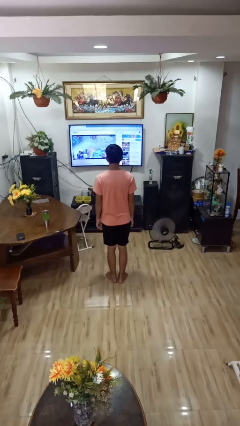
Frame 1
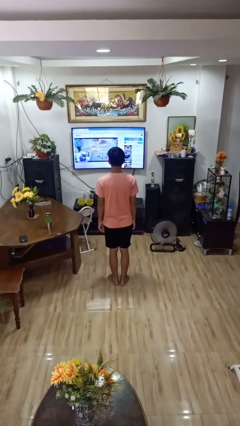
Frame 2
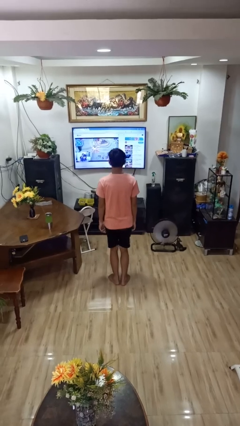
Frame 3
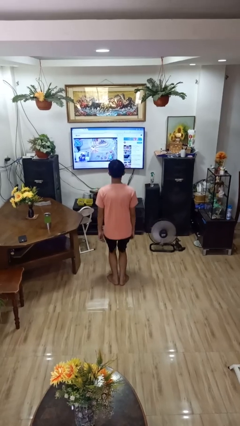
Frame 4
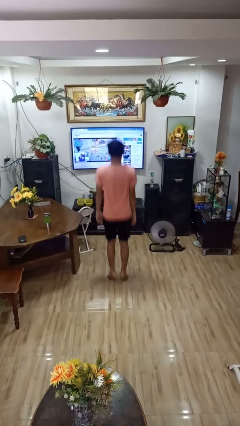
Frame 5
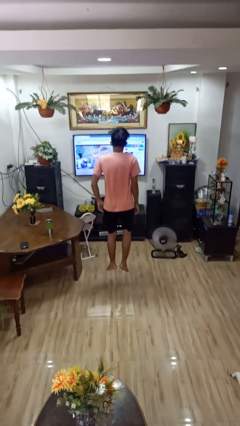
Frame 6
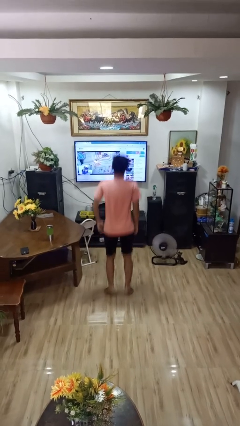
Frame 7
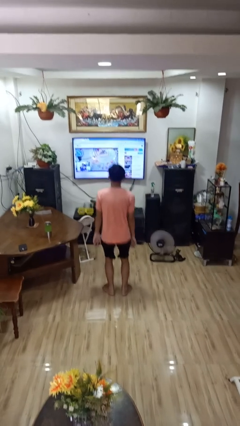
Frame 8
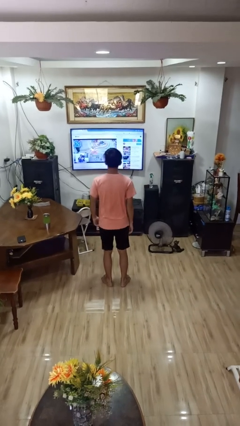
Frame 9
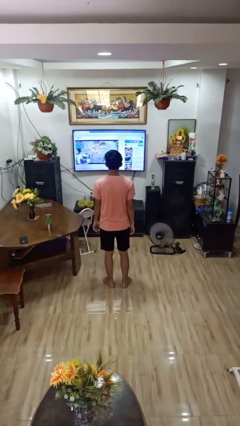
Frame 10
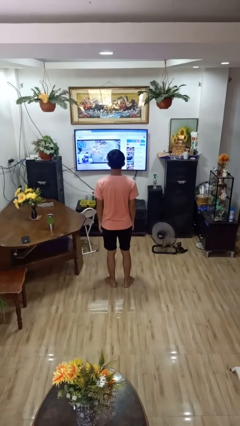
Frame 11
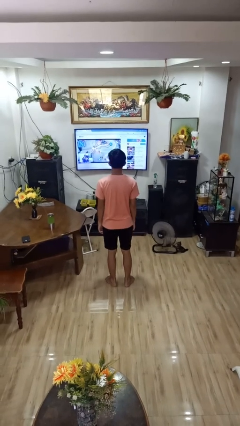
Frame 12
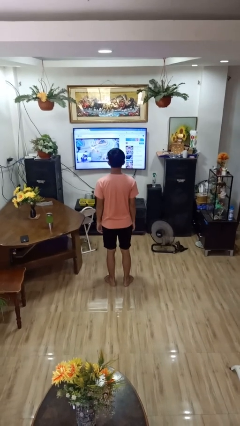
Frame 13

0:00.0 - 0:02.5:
person jumps

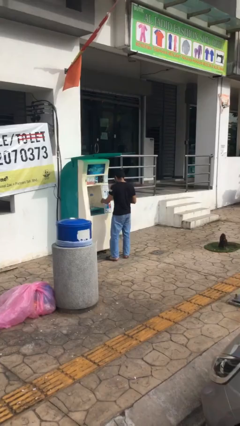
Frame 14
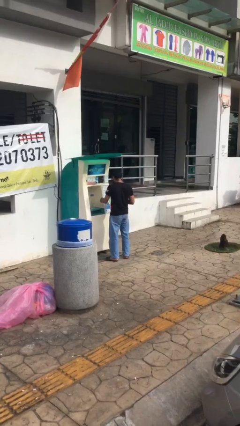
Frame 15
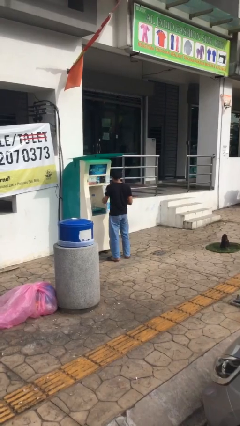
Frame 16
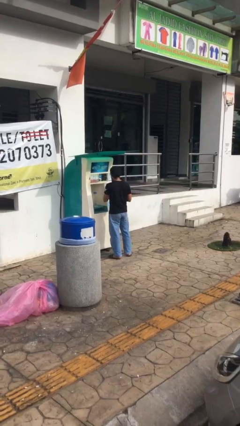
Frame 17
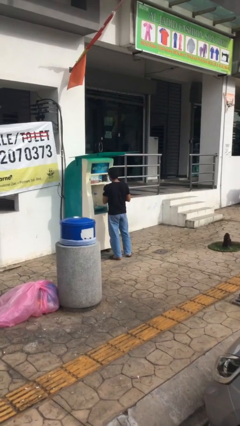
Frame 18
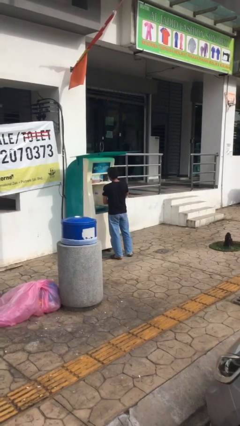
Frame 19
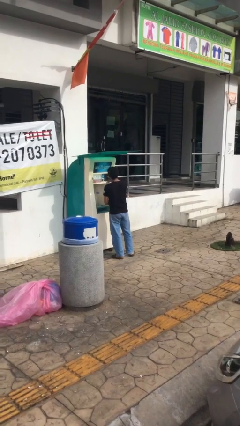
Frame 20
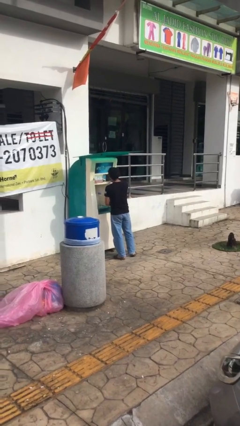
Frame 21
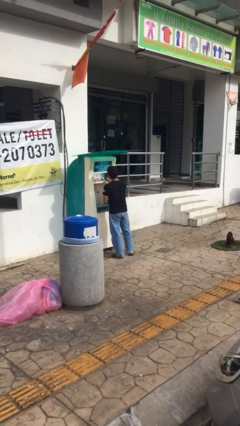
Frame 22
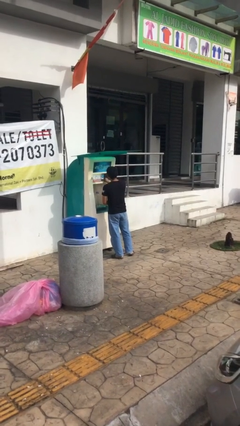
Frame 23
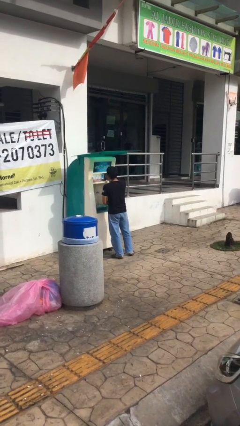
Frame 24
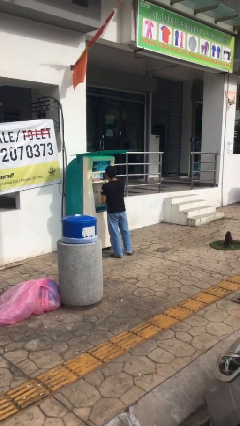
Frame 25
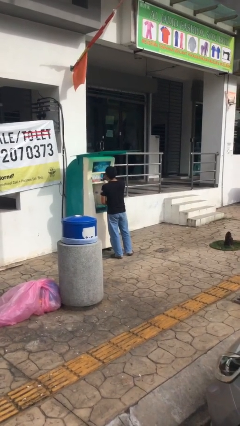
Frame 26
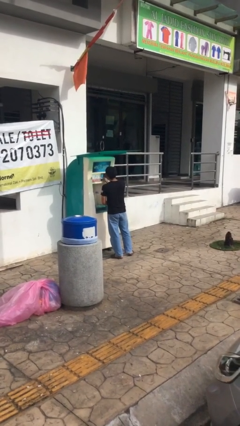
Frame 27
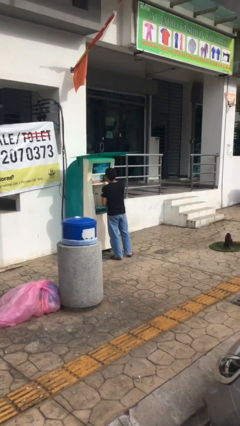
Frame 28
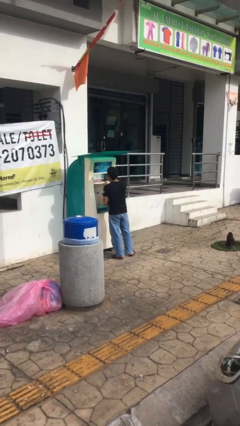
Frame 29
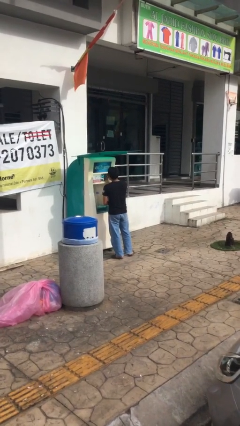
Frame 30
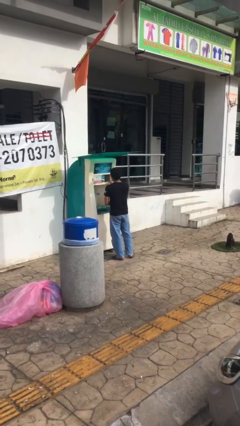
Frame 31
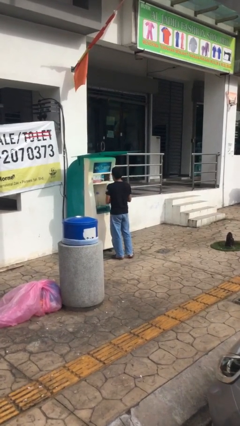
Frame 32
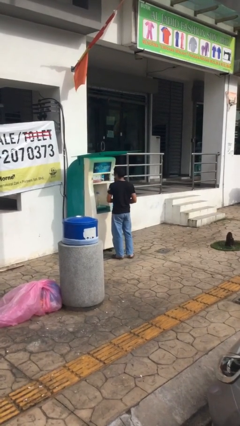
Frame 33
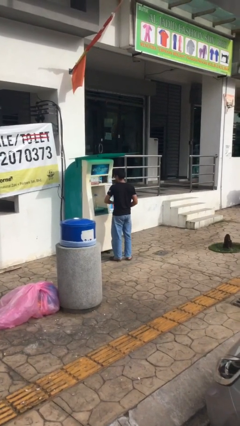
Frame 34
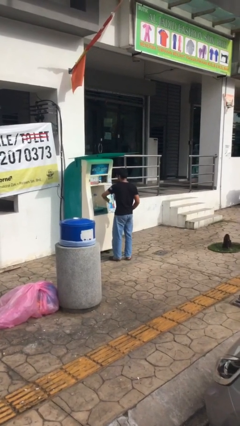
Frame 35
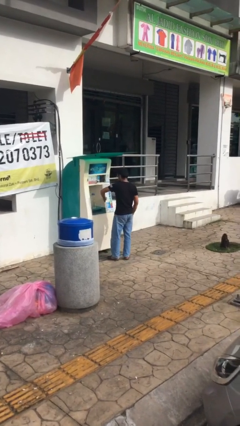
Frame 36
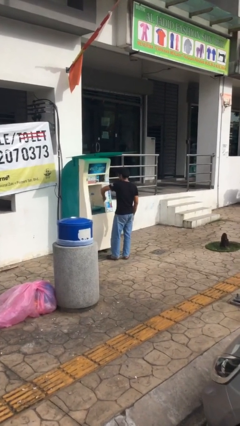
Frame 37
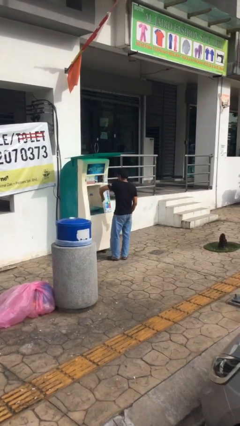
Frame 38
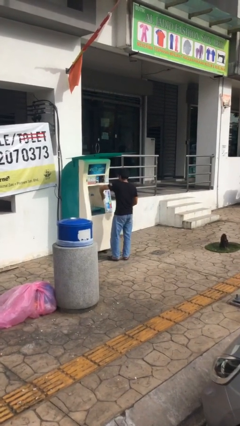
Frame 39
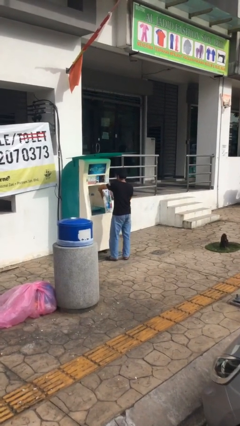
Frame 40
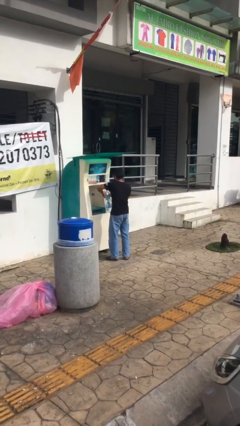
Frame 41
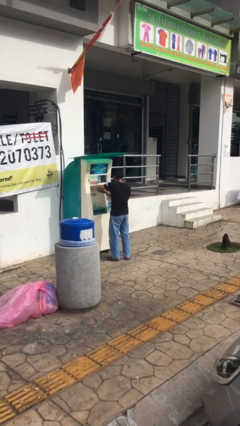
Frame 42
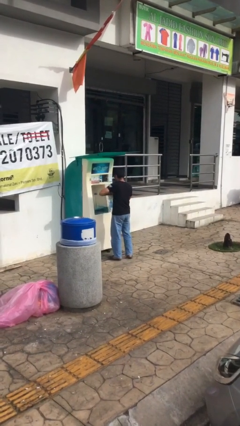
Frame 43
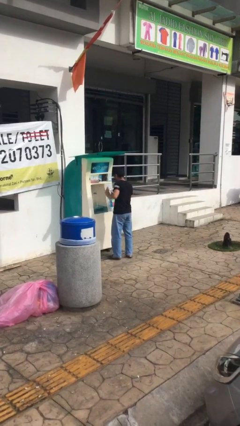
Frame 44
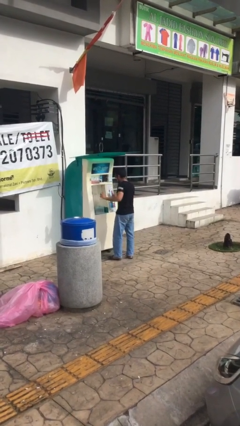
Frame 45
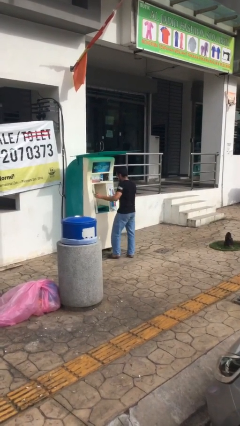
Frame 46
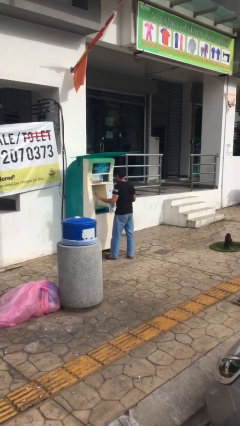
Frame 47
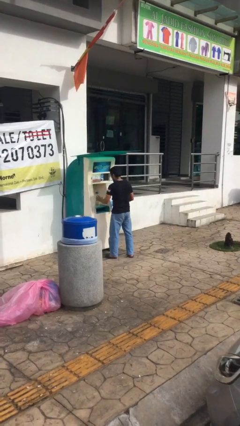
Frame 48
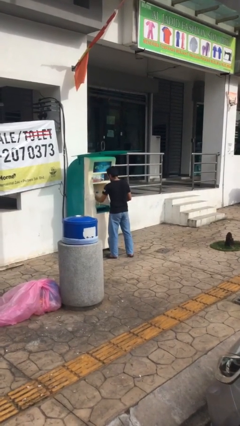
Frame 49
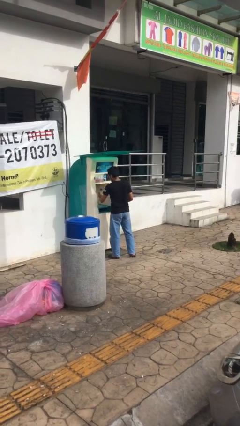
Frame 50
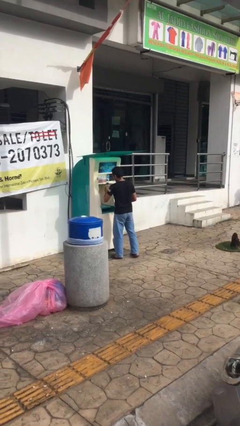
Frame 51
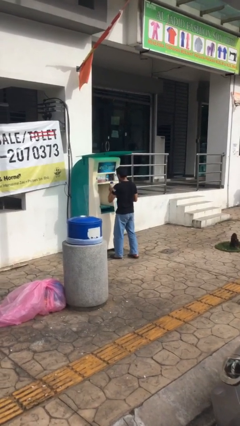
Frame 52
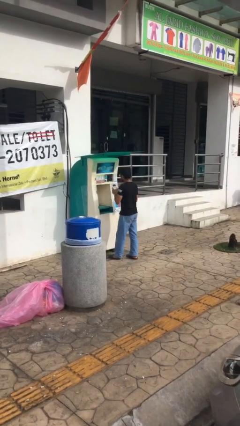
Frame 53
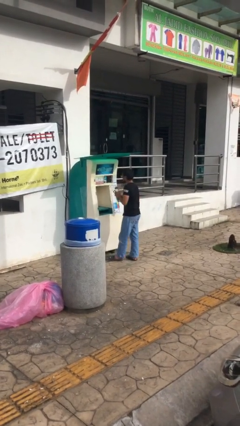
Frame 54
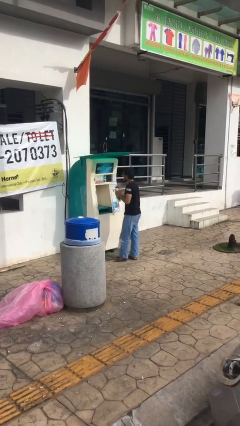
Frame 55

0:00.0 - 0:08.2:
person purchases from machine

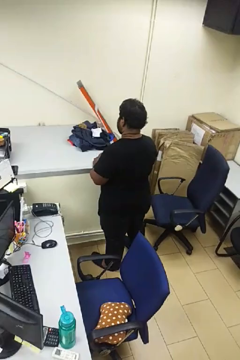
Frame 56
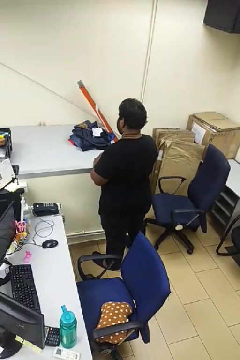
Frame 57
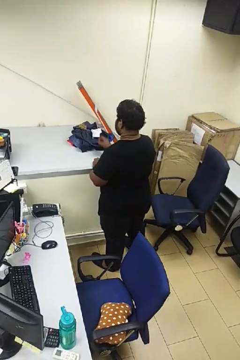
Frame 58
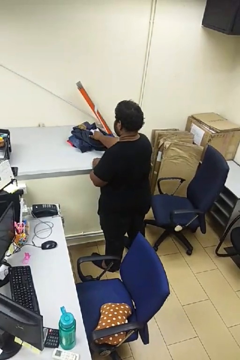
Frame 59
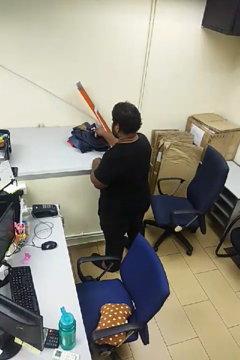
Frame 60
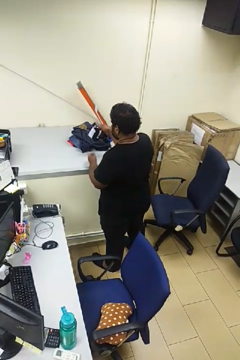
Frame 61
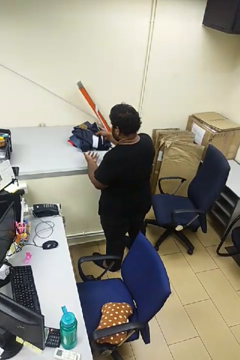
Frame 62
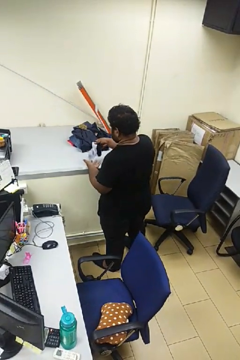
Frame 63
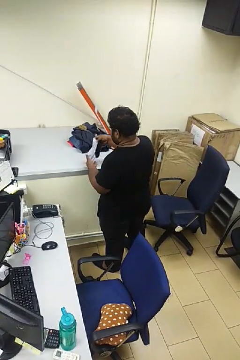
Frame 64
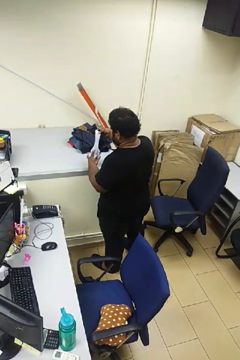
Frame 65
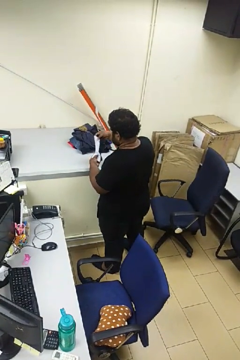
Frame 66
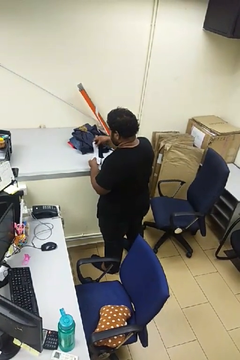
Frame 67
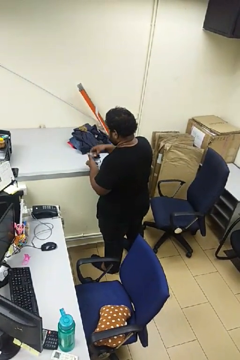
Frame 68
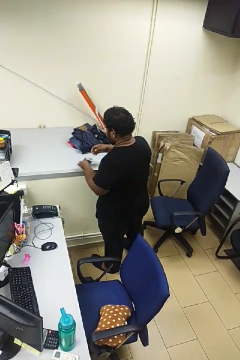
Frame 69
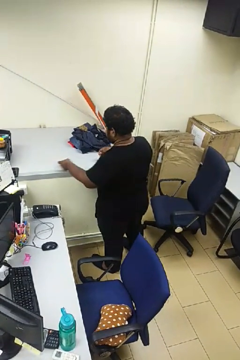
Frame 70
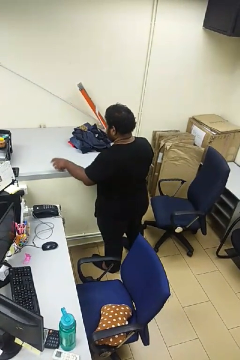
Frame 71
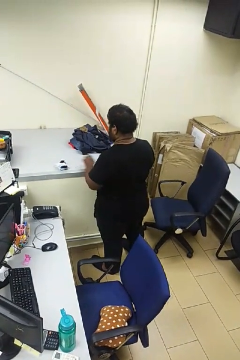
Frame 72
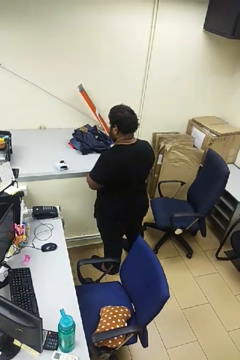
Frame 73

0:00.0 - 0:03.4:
person folds socks

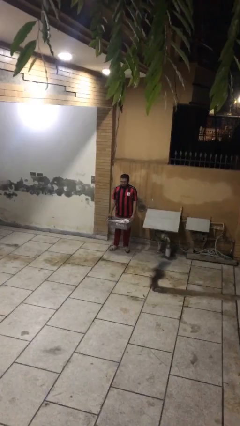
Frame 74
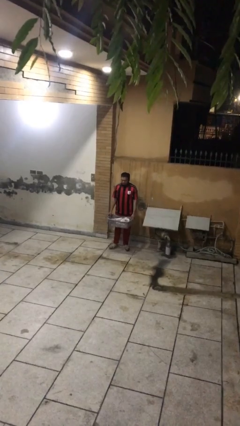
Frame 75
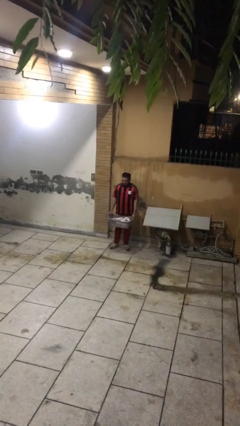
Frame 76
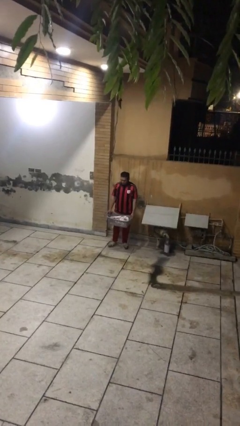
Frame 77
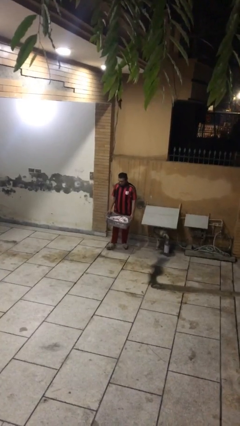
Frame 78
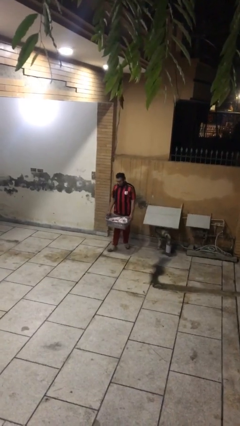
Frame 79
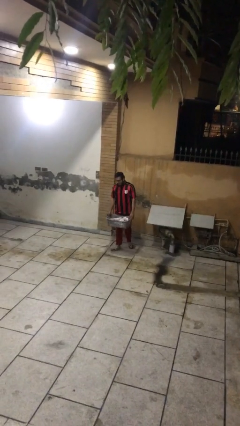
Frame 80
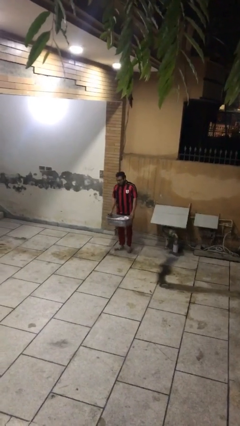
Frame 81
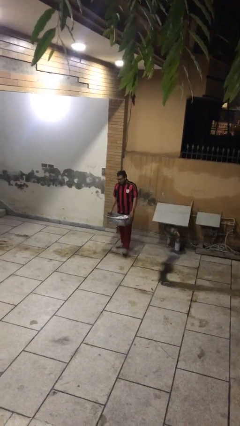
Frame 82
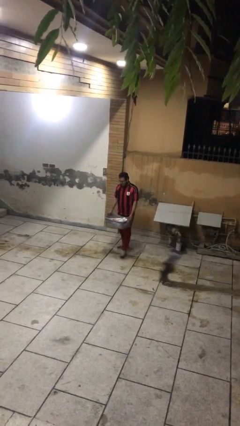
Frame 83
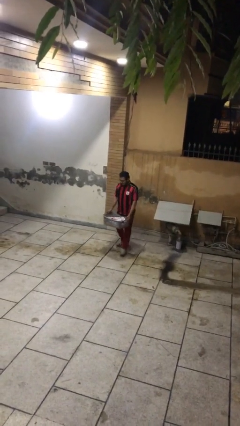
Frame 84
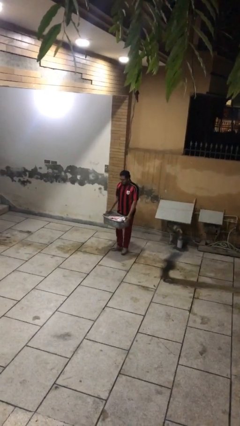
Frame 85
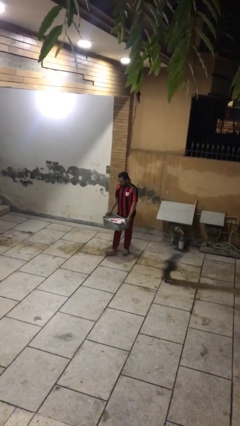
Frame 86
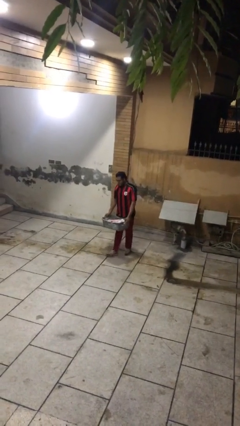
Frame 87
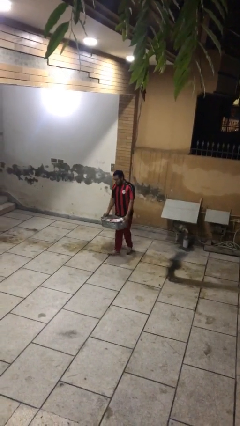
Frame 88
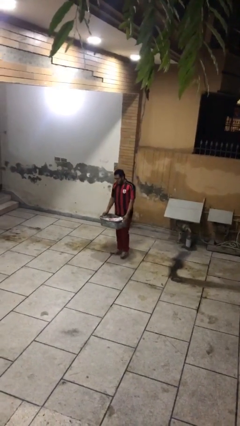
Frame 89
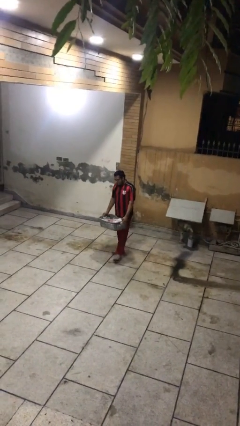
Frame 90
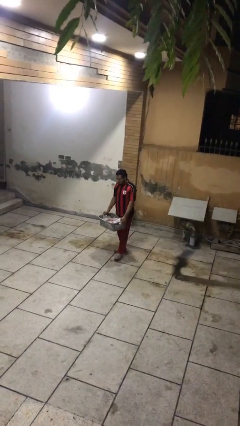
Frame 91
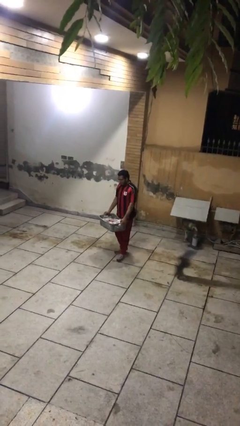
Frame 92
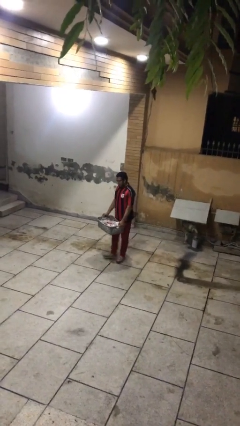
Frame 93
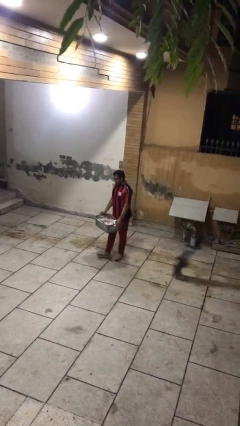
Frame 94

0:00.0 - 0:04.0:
person carries heavy object

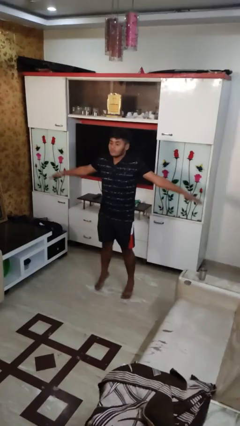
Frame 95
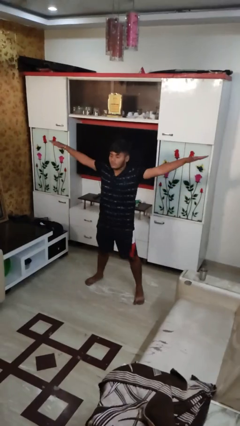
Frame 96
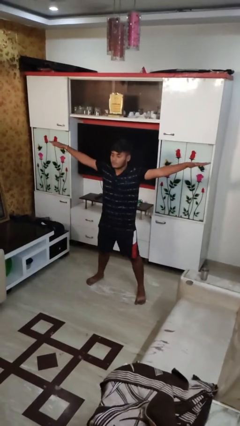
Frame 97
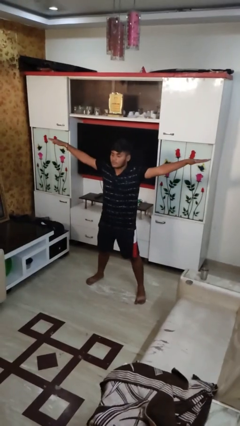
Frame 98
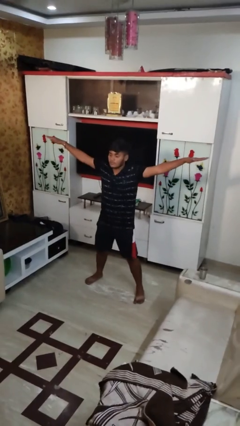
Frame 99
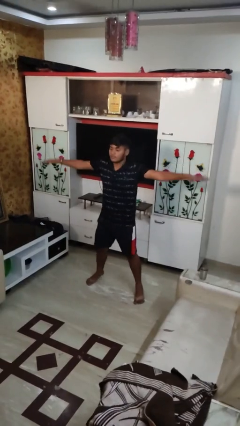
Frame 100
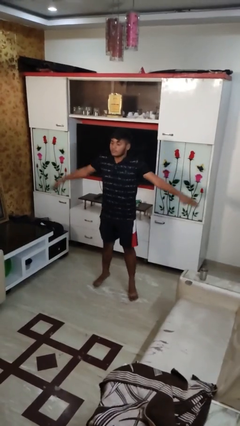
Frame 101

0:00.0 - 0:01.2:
person exercises with jumping jacks
